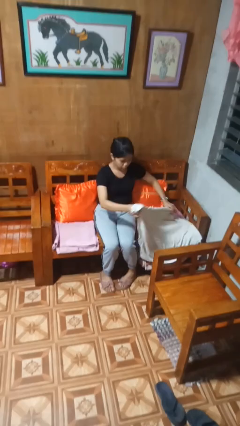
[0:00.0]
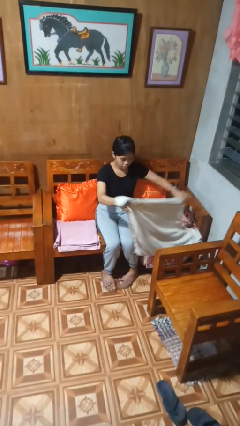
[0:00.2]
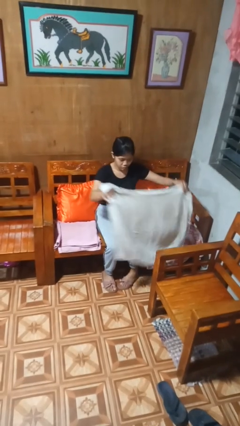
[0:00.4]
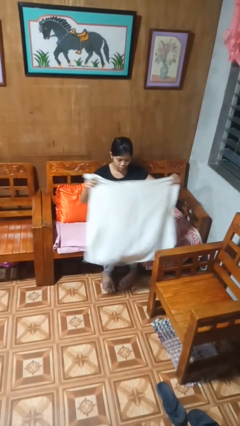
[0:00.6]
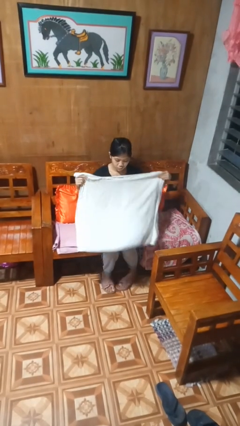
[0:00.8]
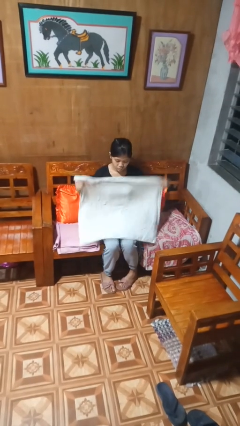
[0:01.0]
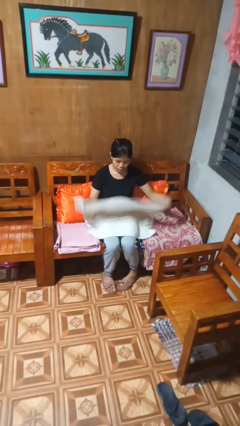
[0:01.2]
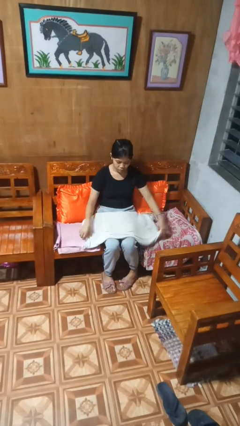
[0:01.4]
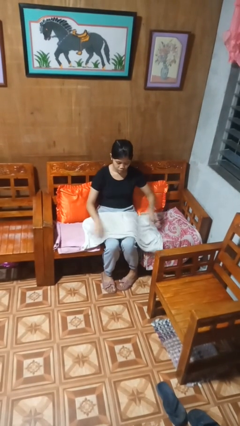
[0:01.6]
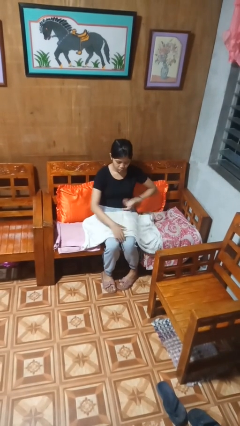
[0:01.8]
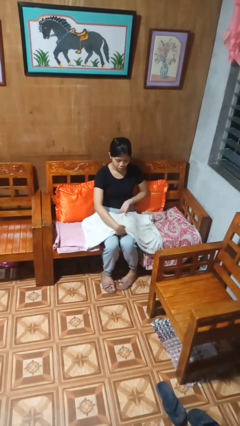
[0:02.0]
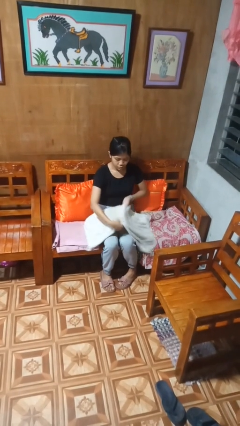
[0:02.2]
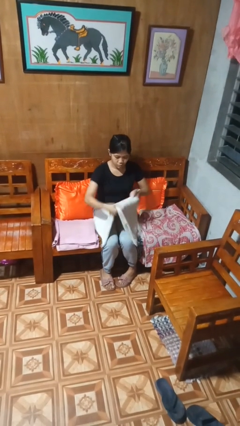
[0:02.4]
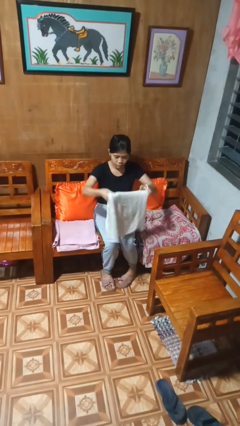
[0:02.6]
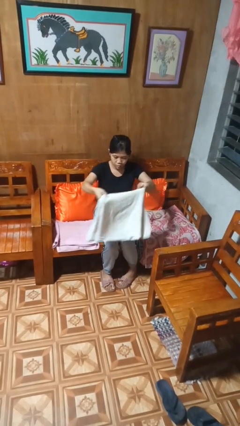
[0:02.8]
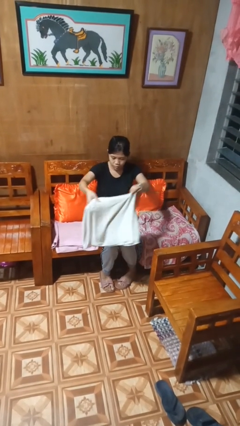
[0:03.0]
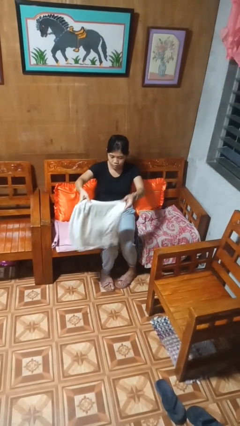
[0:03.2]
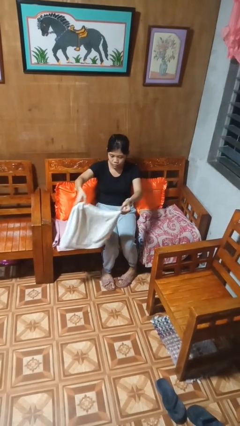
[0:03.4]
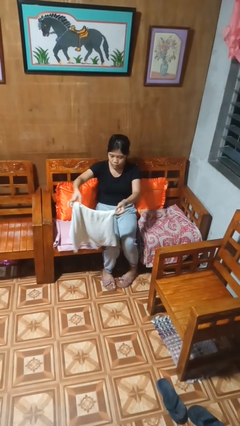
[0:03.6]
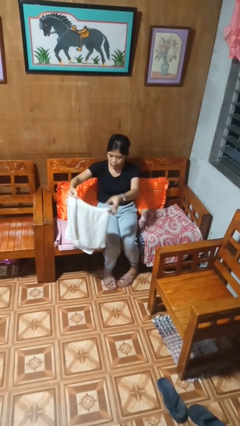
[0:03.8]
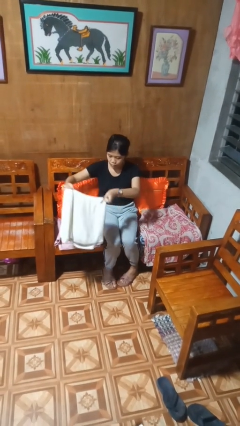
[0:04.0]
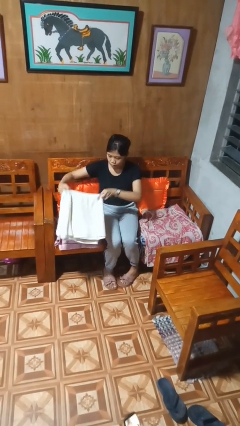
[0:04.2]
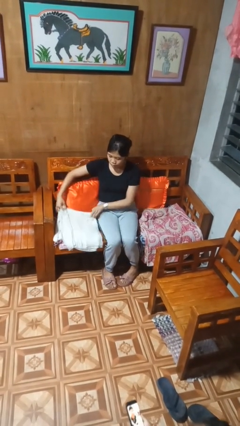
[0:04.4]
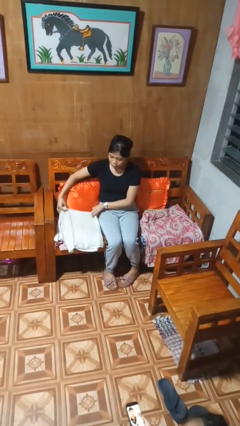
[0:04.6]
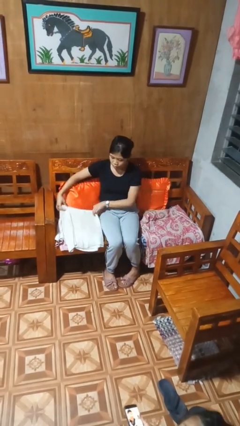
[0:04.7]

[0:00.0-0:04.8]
person folds towel

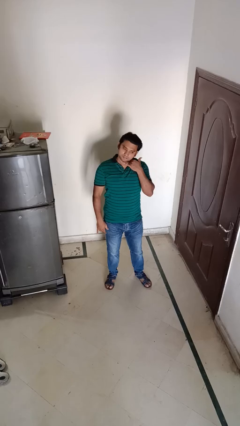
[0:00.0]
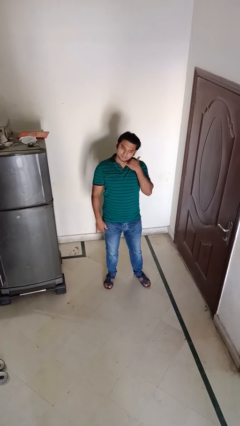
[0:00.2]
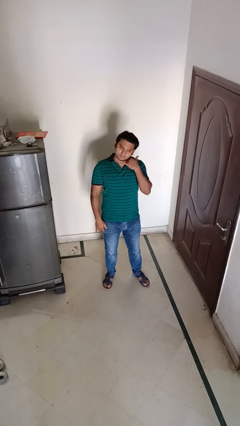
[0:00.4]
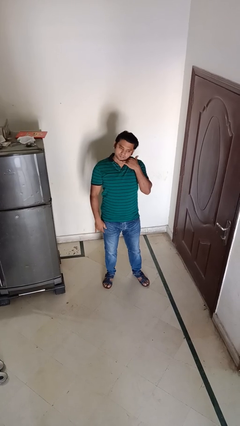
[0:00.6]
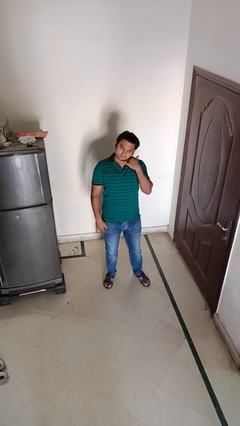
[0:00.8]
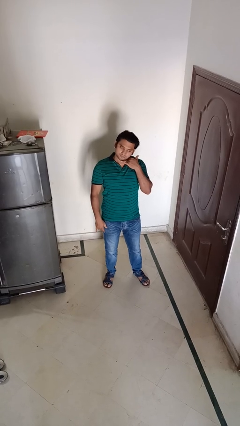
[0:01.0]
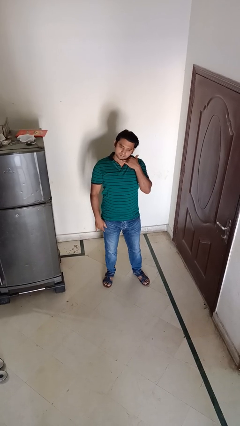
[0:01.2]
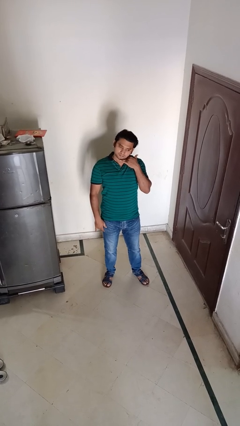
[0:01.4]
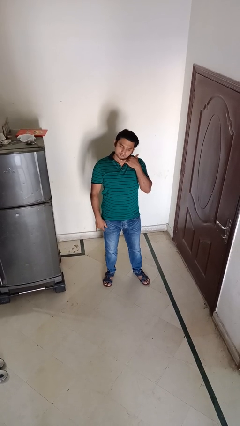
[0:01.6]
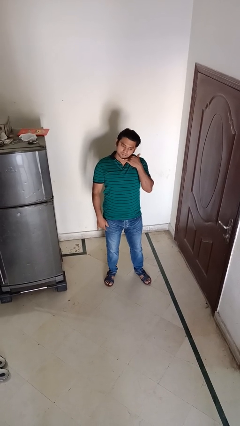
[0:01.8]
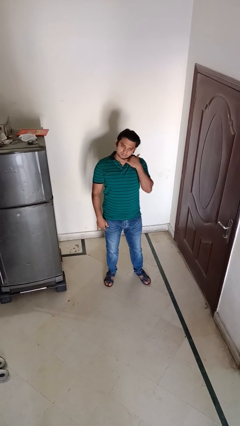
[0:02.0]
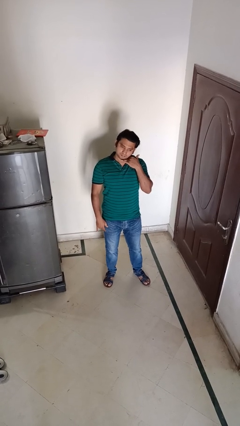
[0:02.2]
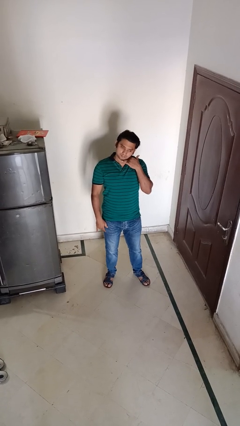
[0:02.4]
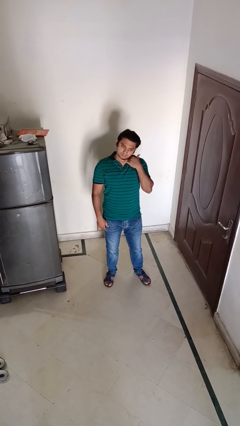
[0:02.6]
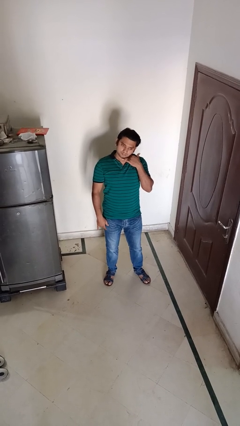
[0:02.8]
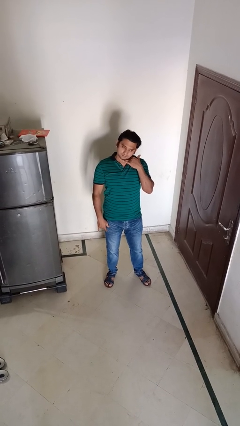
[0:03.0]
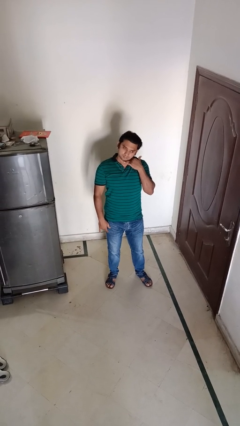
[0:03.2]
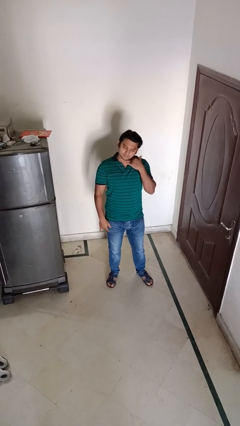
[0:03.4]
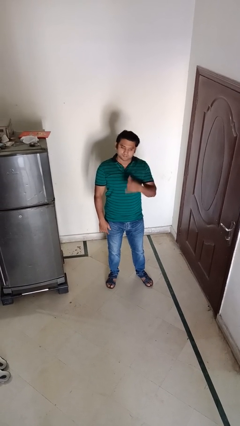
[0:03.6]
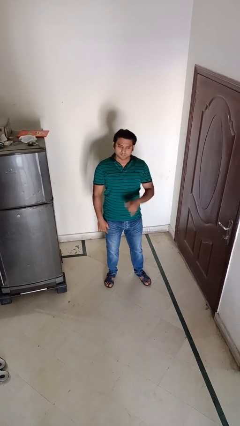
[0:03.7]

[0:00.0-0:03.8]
person gestures call me

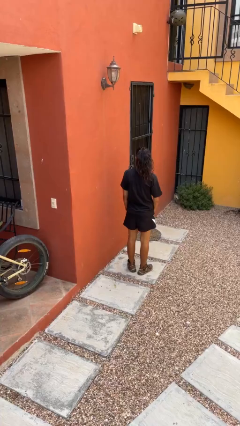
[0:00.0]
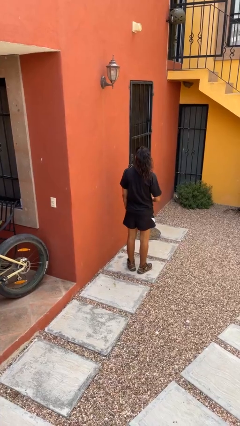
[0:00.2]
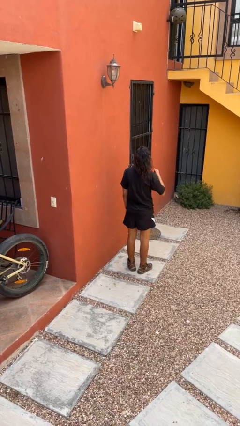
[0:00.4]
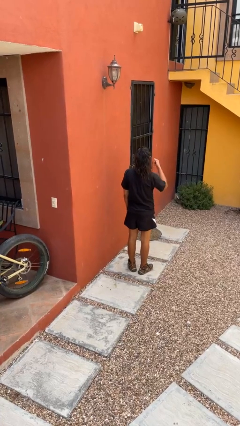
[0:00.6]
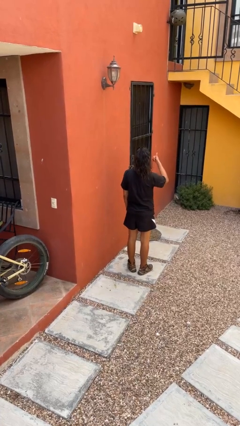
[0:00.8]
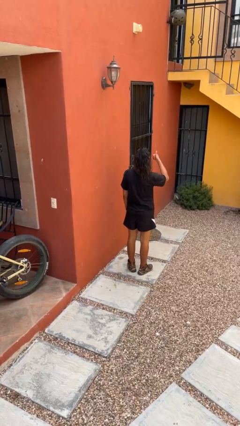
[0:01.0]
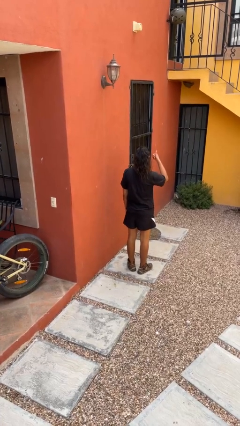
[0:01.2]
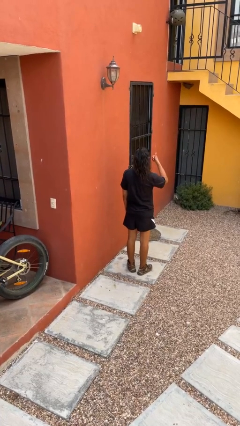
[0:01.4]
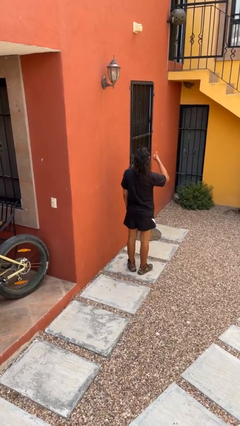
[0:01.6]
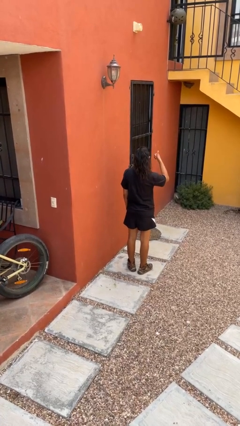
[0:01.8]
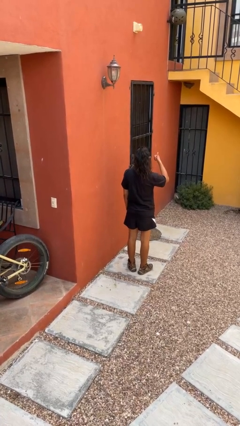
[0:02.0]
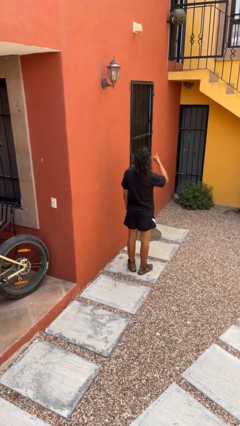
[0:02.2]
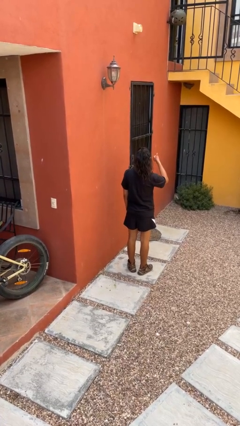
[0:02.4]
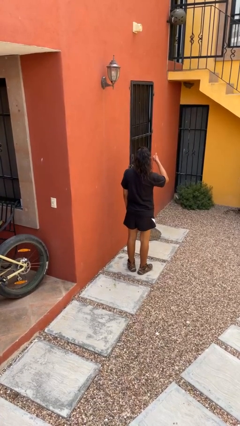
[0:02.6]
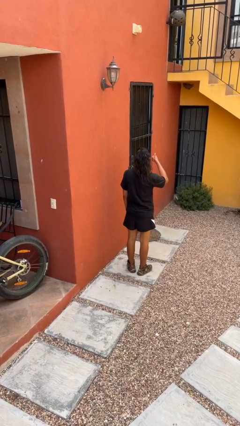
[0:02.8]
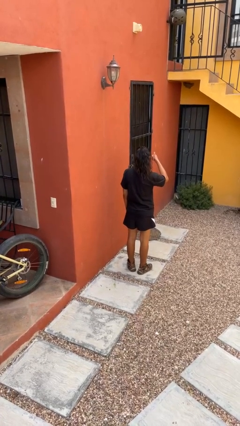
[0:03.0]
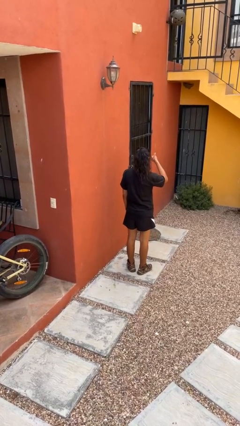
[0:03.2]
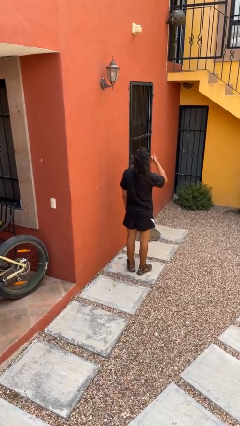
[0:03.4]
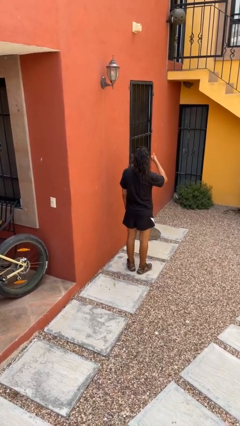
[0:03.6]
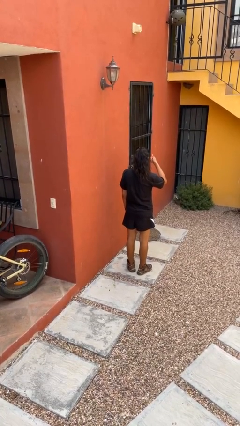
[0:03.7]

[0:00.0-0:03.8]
person gestures thumbs up

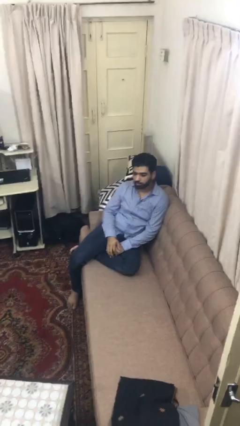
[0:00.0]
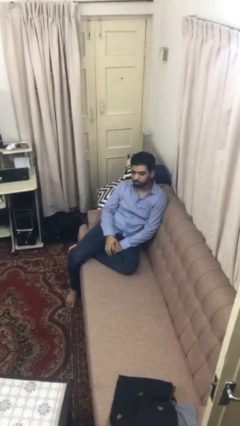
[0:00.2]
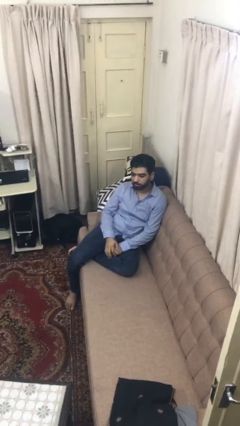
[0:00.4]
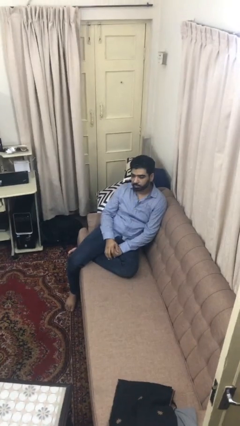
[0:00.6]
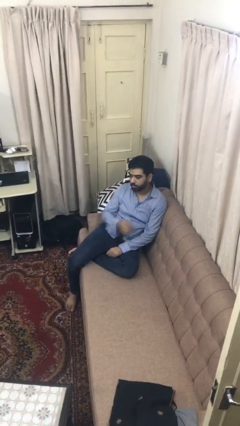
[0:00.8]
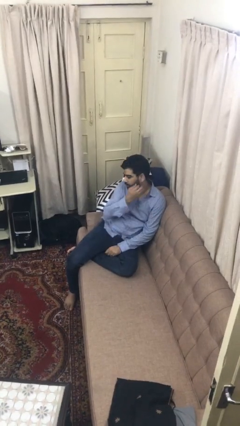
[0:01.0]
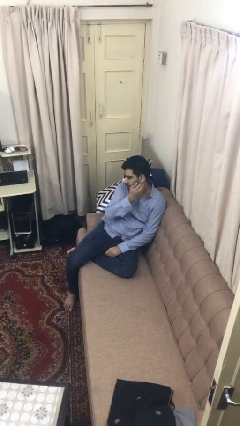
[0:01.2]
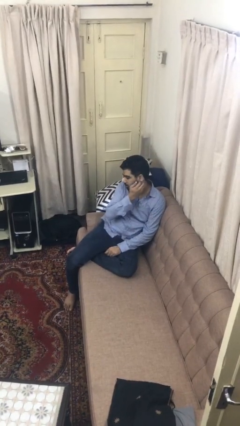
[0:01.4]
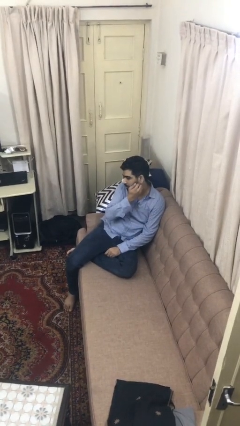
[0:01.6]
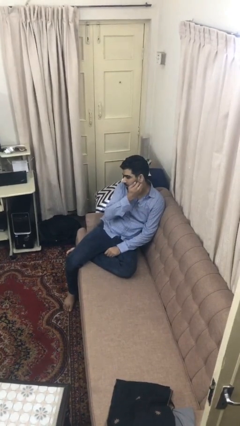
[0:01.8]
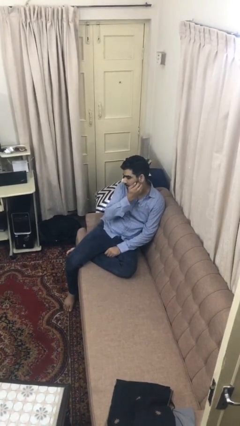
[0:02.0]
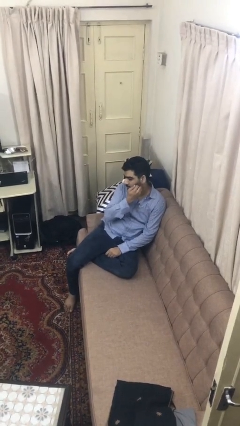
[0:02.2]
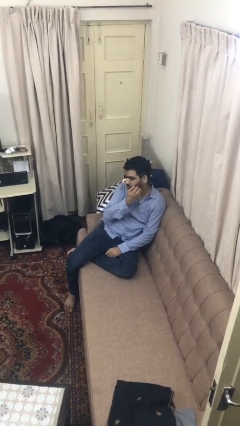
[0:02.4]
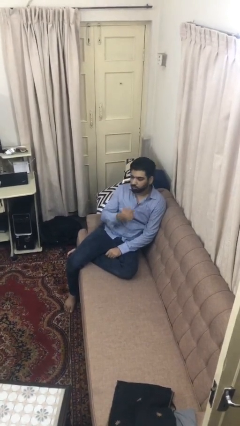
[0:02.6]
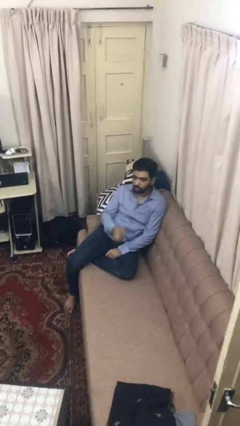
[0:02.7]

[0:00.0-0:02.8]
person scratches face

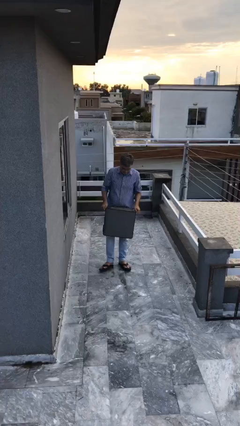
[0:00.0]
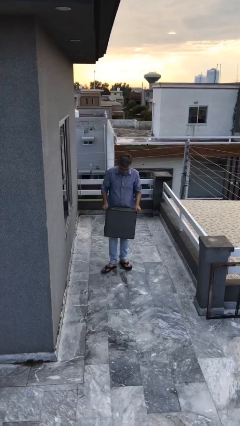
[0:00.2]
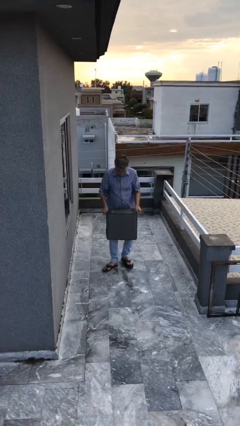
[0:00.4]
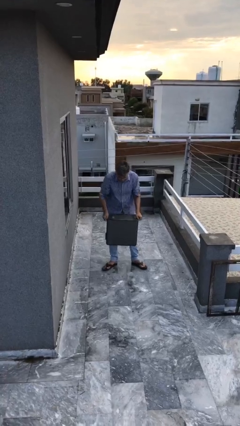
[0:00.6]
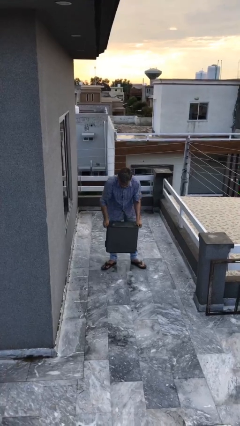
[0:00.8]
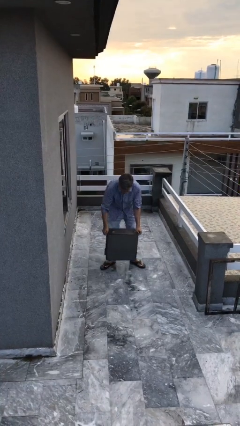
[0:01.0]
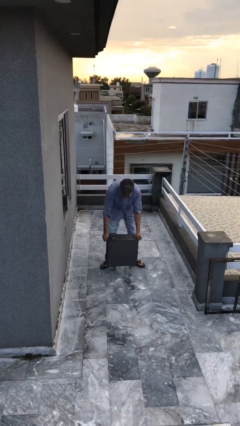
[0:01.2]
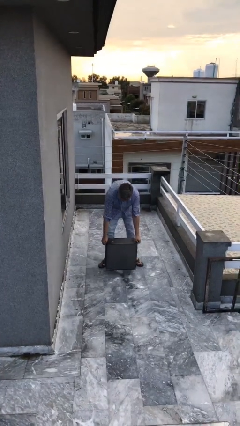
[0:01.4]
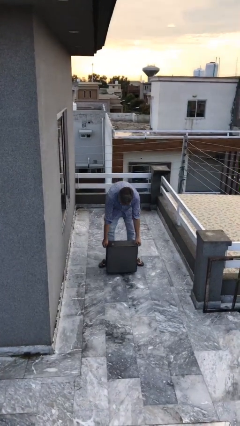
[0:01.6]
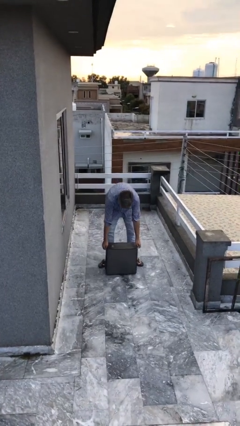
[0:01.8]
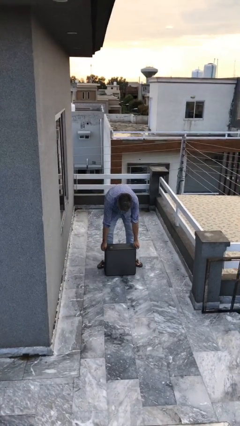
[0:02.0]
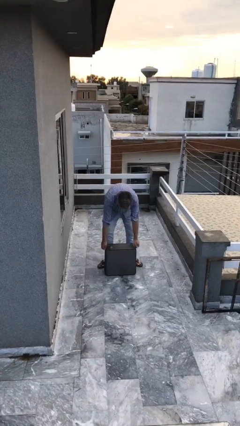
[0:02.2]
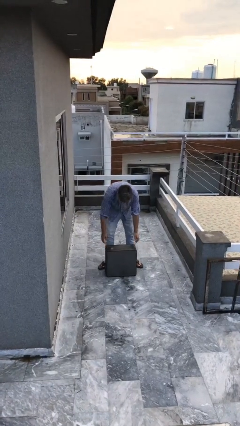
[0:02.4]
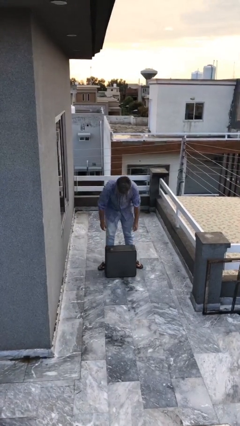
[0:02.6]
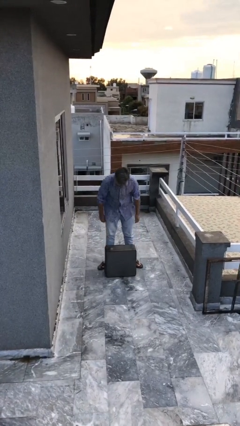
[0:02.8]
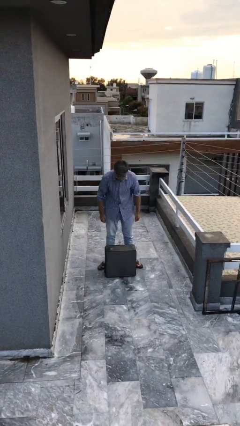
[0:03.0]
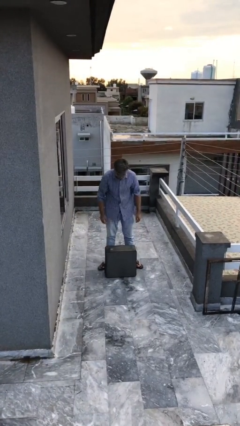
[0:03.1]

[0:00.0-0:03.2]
person puts down object on floor
